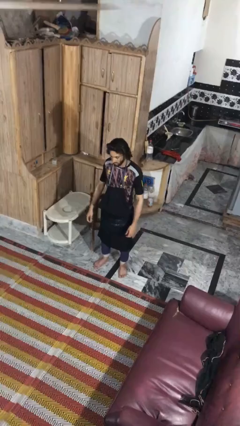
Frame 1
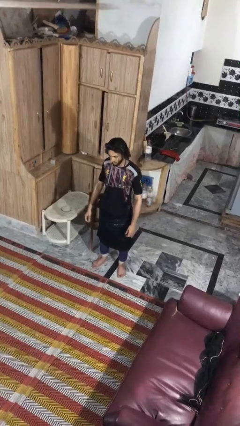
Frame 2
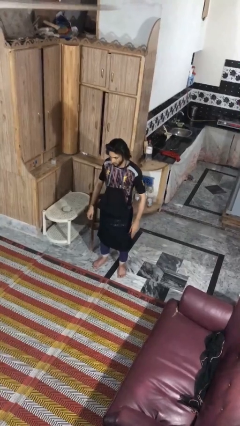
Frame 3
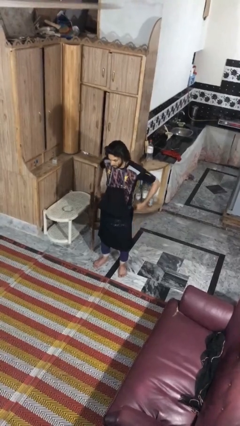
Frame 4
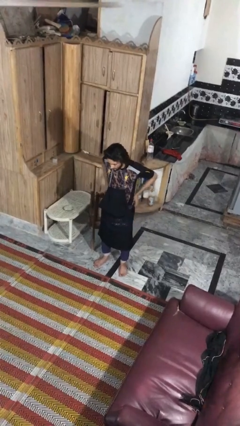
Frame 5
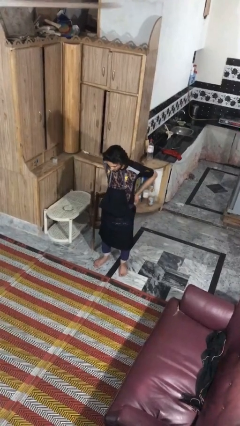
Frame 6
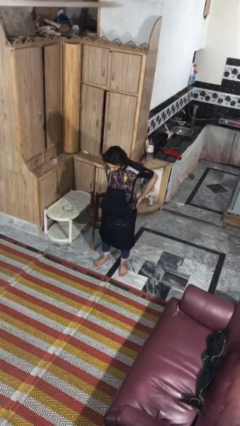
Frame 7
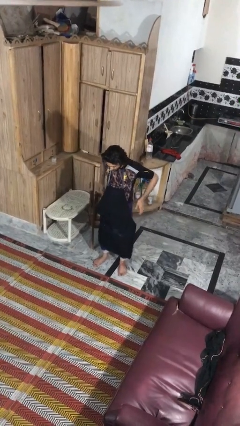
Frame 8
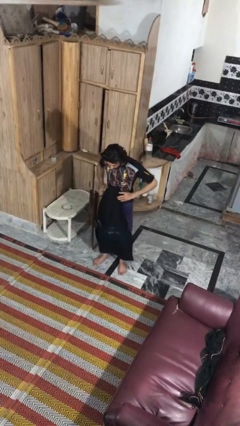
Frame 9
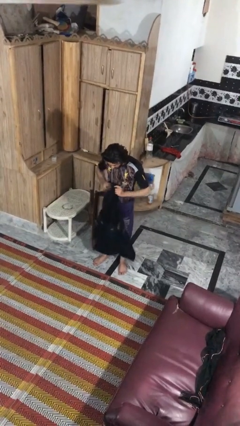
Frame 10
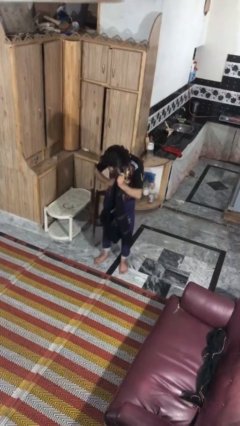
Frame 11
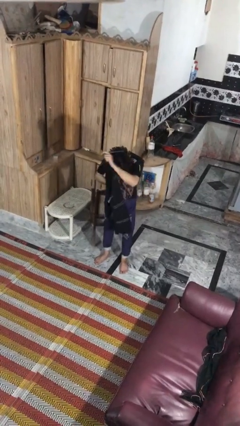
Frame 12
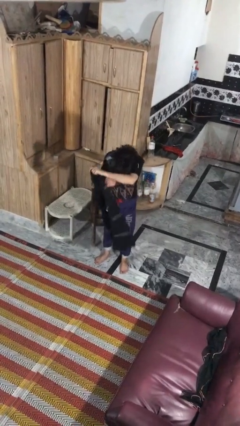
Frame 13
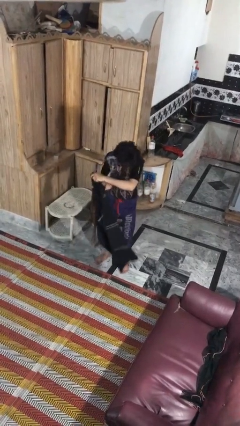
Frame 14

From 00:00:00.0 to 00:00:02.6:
person takes off apron

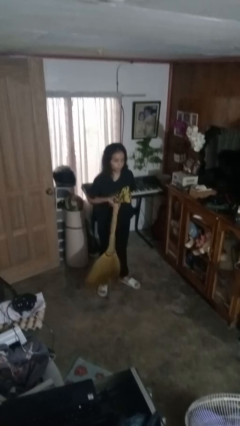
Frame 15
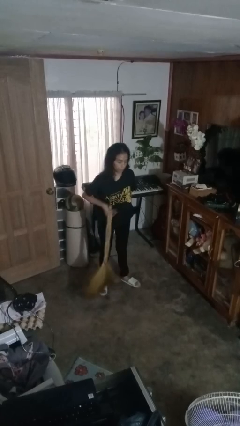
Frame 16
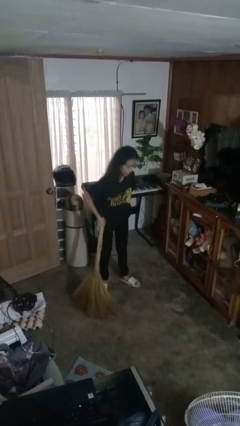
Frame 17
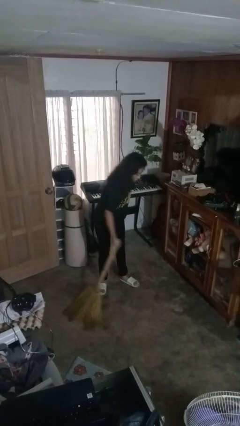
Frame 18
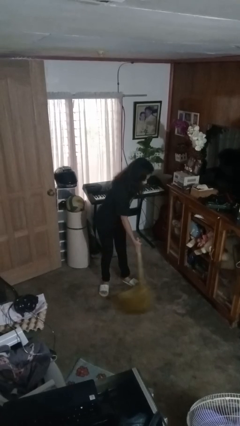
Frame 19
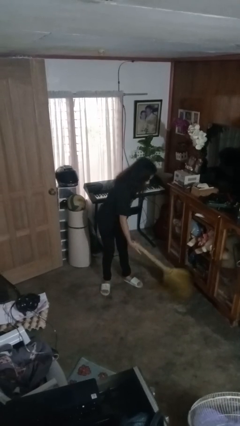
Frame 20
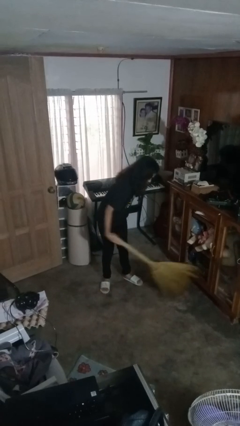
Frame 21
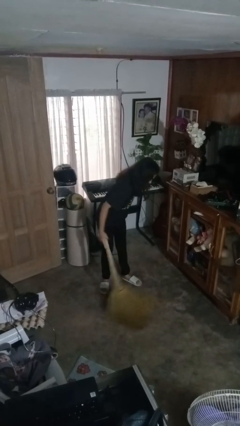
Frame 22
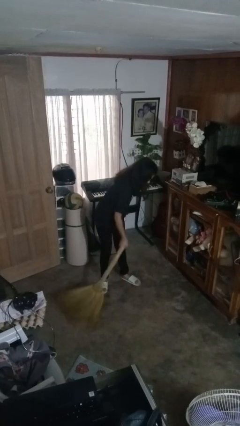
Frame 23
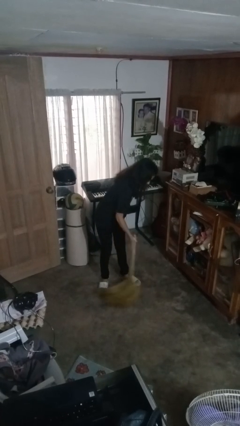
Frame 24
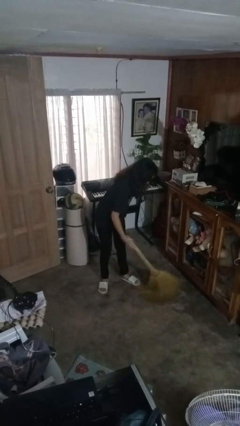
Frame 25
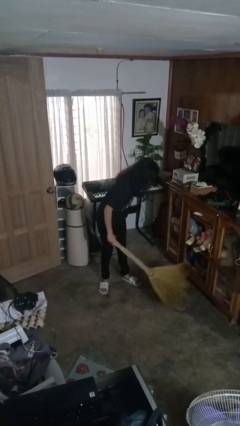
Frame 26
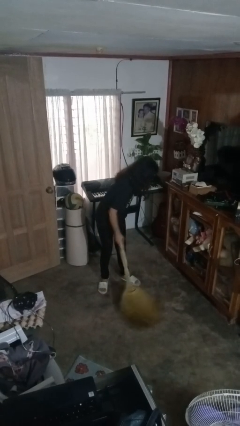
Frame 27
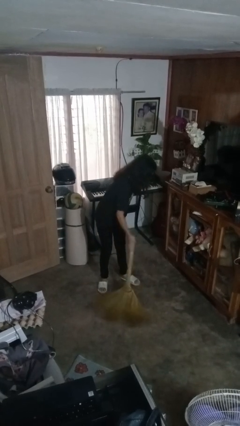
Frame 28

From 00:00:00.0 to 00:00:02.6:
person sweeps floor

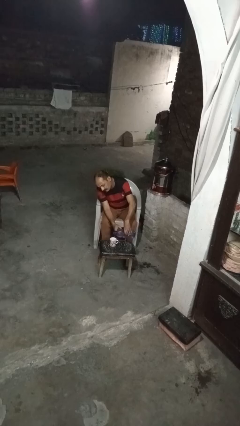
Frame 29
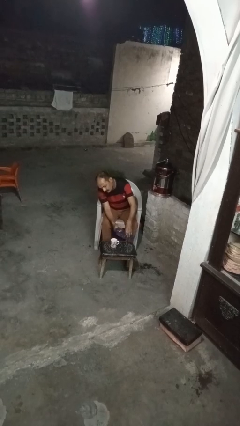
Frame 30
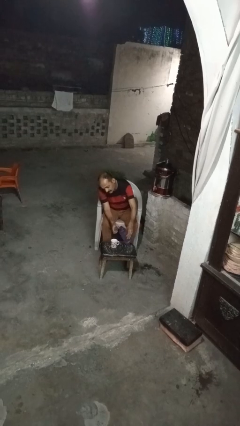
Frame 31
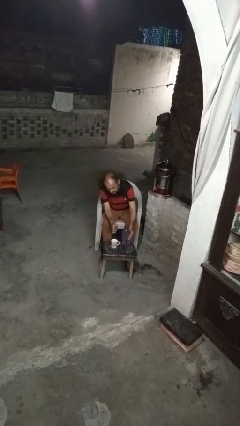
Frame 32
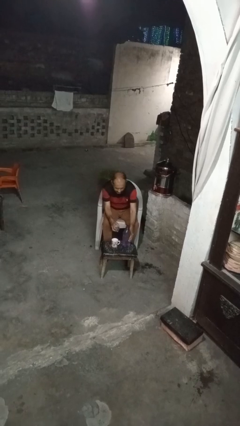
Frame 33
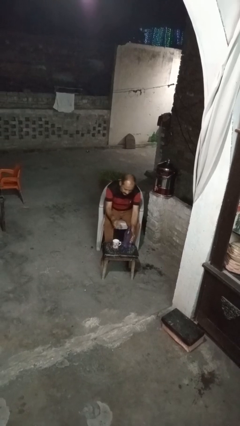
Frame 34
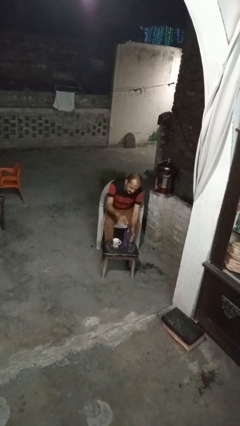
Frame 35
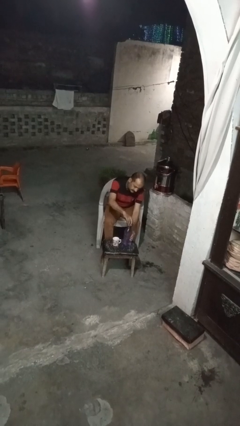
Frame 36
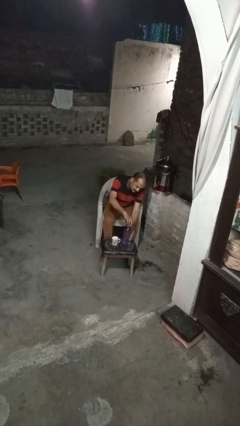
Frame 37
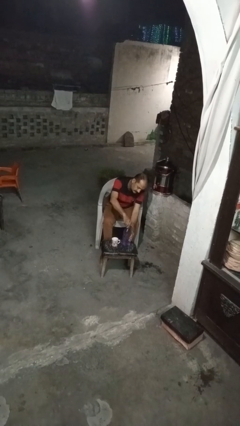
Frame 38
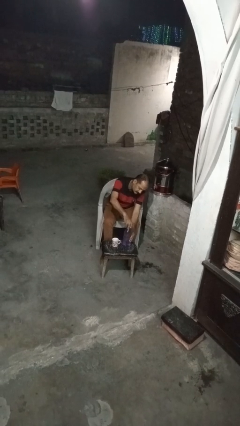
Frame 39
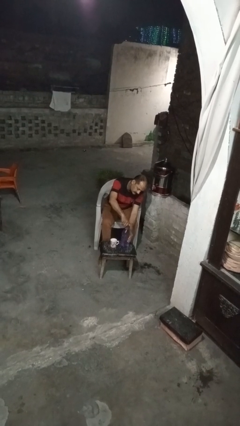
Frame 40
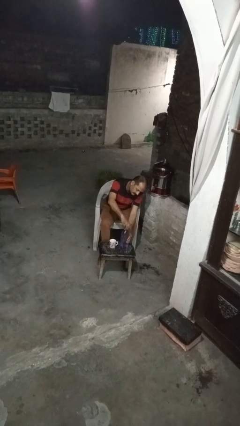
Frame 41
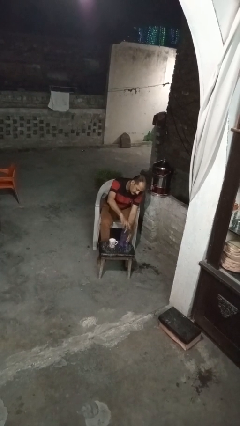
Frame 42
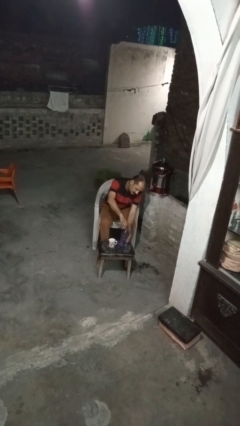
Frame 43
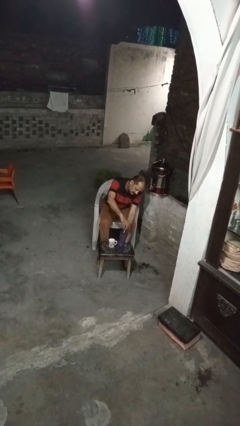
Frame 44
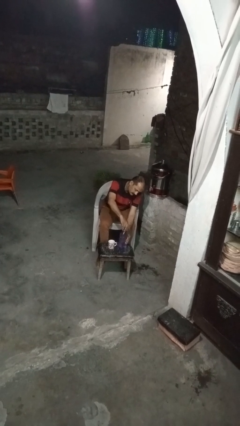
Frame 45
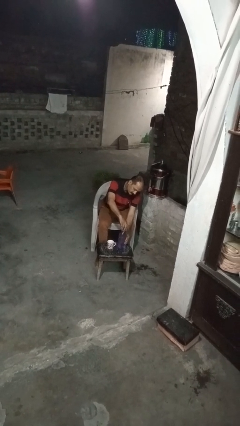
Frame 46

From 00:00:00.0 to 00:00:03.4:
person screws lid to bottle

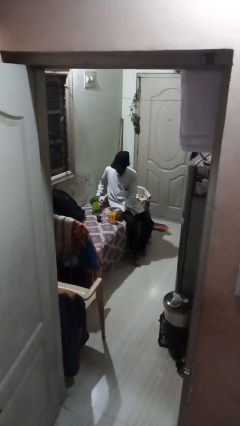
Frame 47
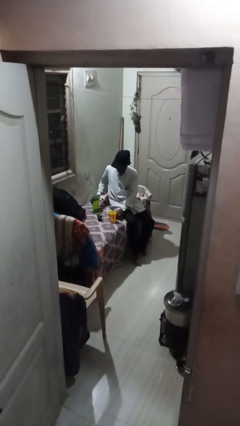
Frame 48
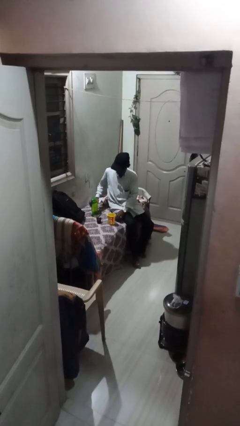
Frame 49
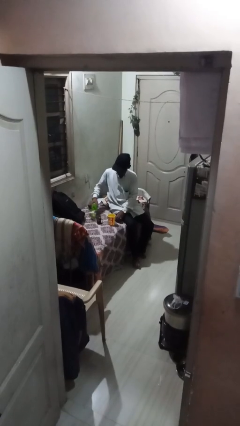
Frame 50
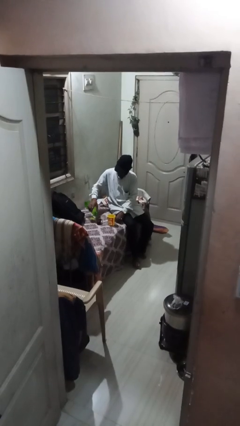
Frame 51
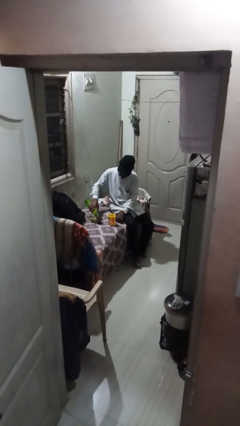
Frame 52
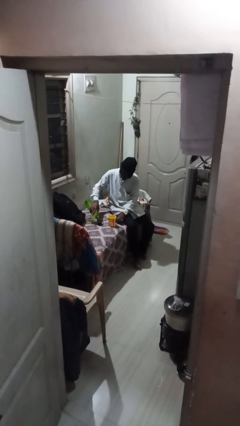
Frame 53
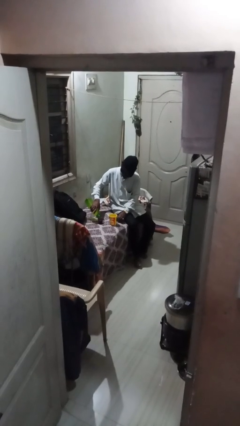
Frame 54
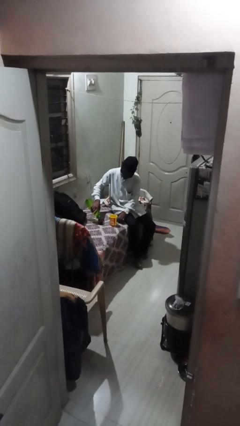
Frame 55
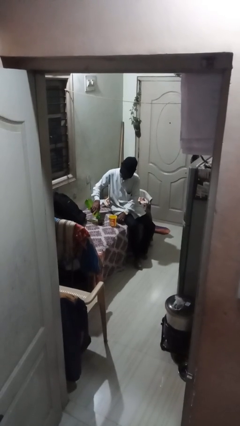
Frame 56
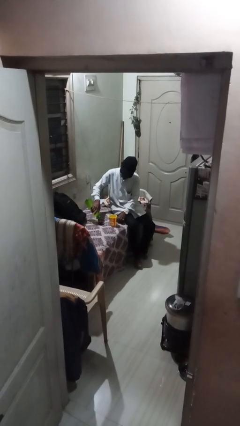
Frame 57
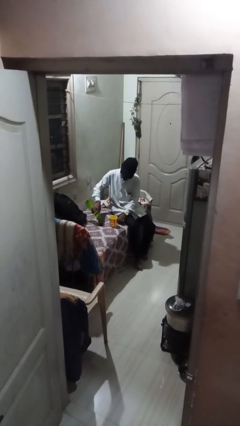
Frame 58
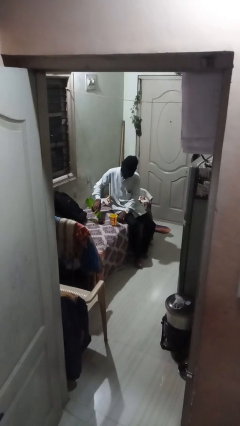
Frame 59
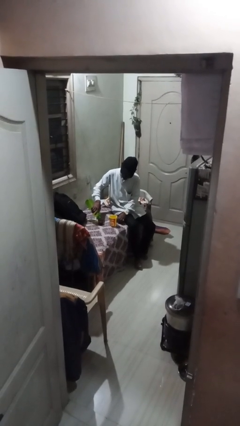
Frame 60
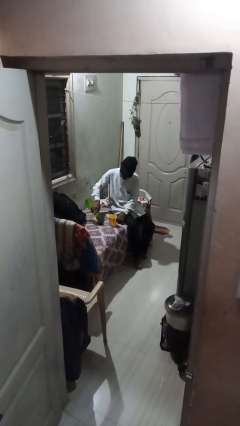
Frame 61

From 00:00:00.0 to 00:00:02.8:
person pours liquid into cup

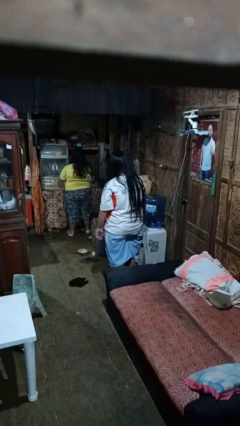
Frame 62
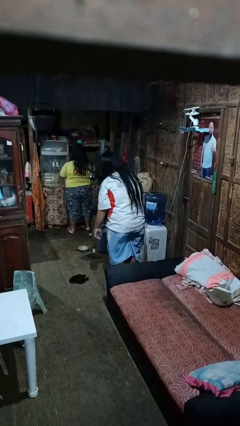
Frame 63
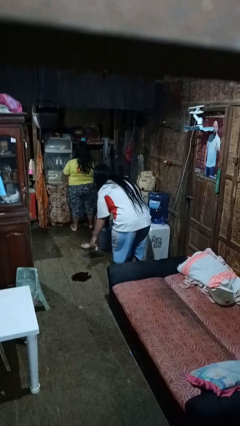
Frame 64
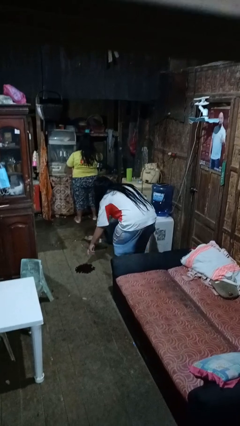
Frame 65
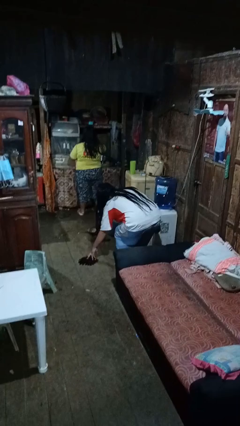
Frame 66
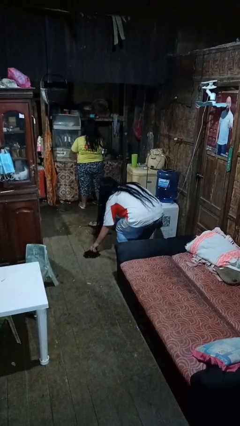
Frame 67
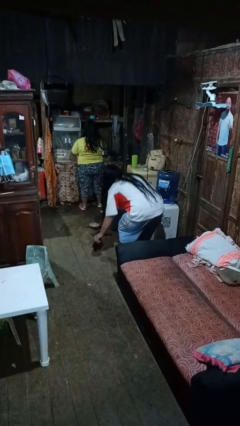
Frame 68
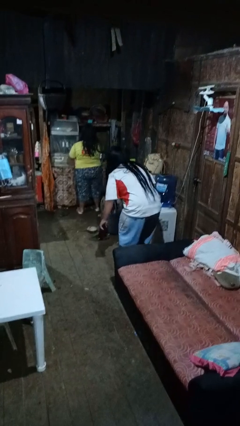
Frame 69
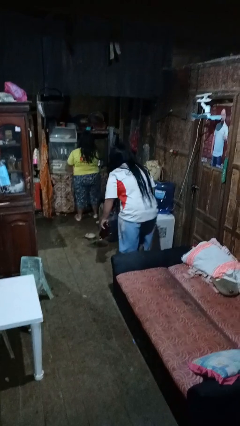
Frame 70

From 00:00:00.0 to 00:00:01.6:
person picks up object from floor

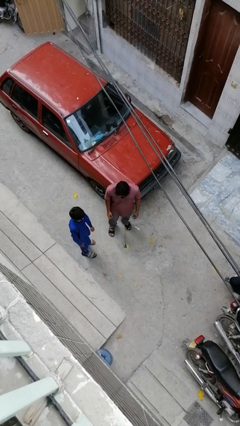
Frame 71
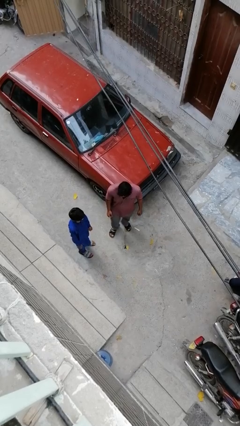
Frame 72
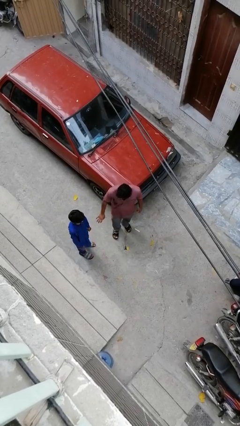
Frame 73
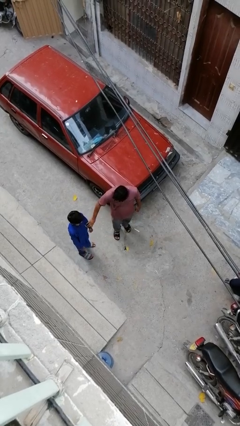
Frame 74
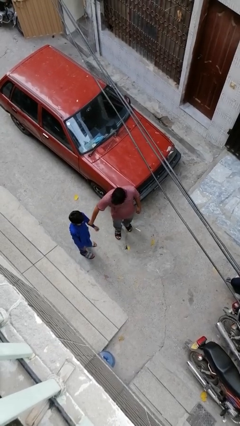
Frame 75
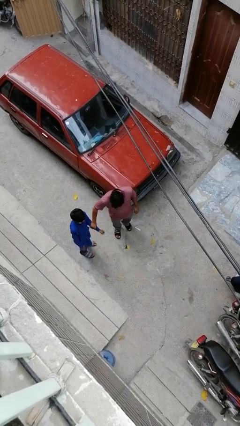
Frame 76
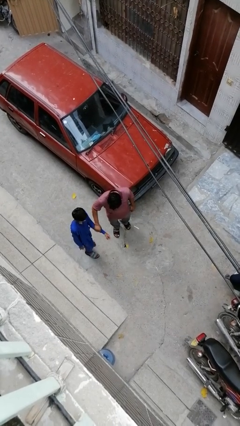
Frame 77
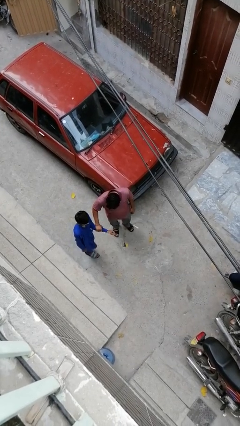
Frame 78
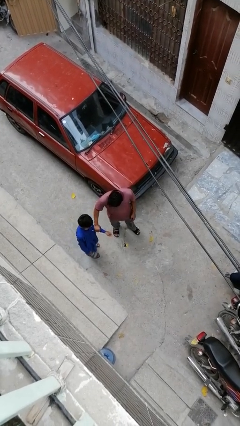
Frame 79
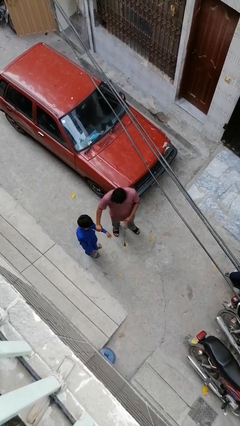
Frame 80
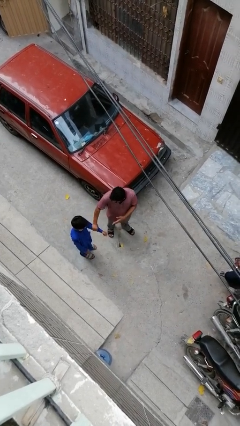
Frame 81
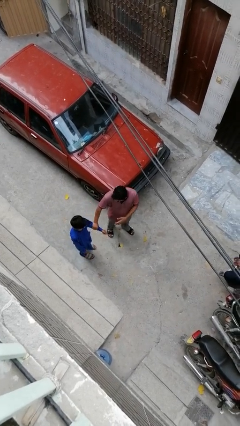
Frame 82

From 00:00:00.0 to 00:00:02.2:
person grabs person by forearm

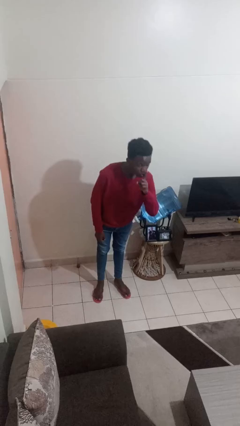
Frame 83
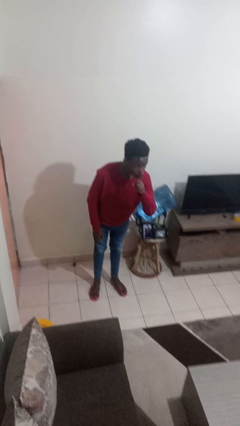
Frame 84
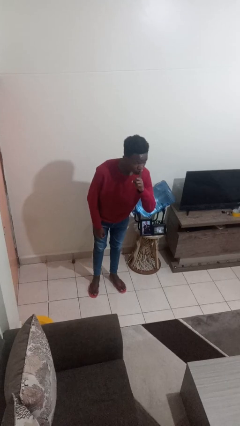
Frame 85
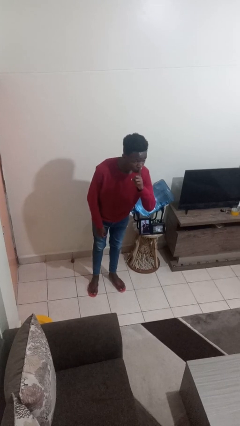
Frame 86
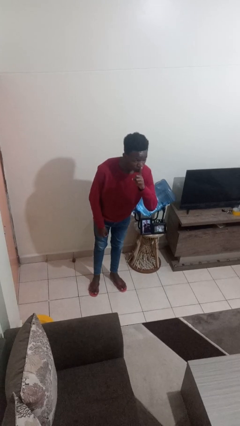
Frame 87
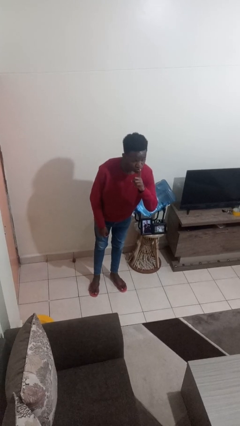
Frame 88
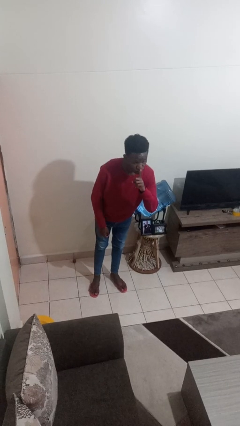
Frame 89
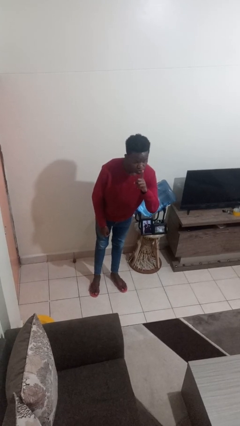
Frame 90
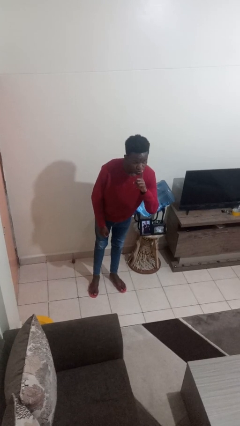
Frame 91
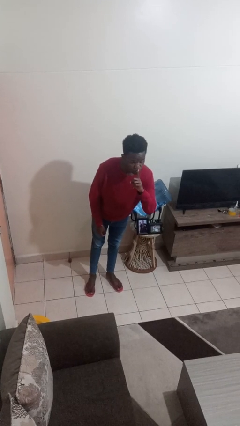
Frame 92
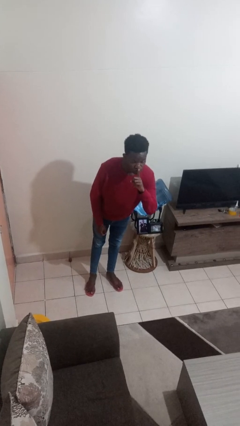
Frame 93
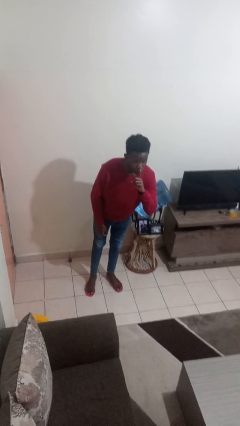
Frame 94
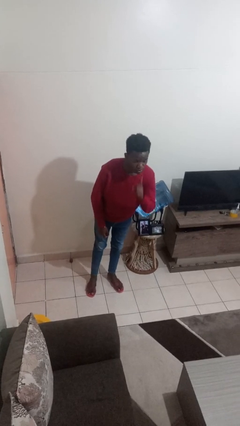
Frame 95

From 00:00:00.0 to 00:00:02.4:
person gestures be quiet
